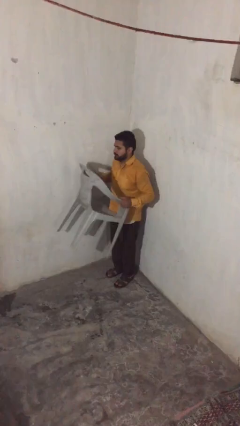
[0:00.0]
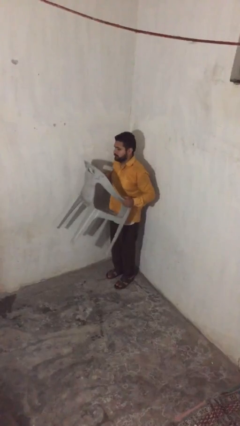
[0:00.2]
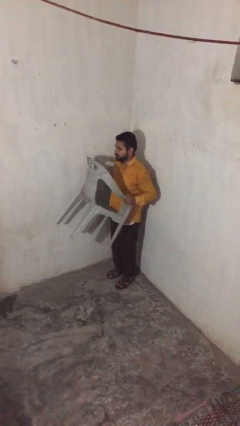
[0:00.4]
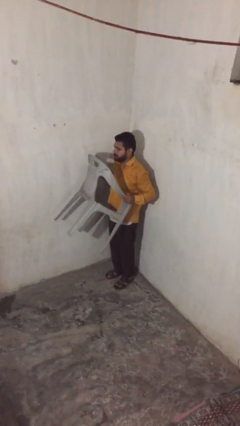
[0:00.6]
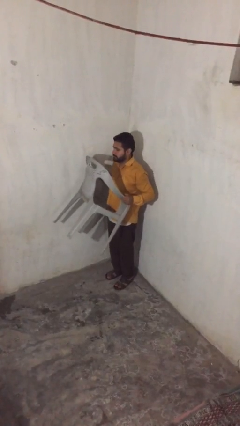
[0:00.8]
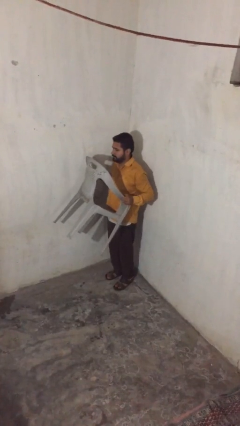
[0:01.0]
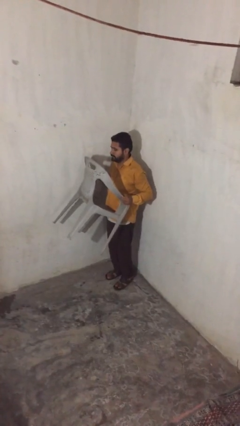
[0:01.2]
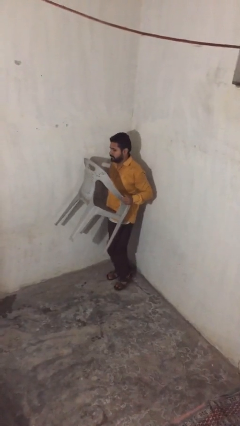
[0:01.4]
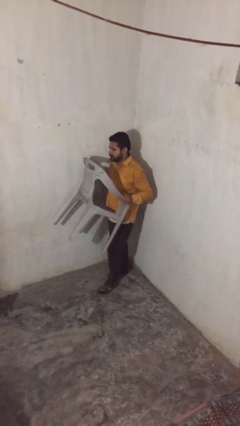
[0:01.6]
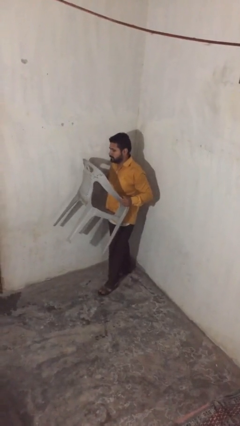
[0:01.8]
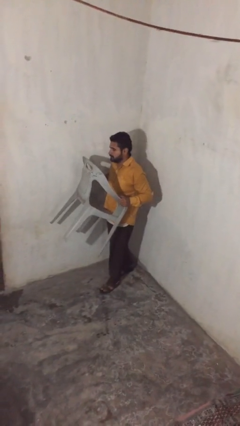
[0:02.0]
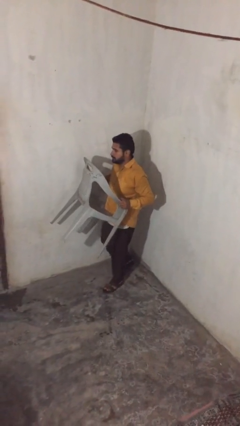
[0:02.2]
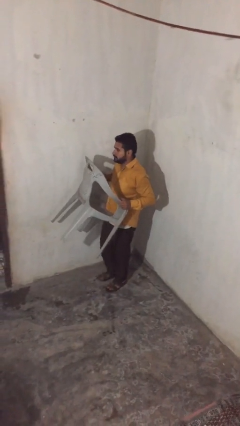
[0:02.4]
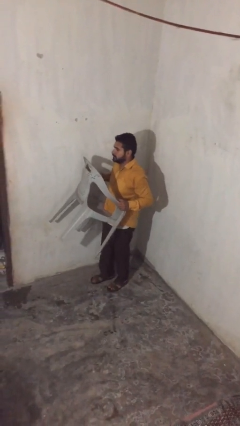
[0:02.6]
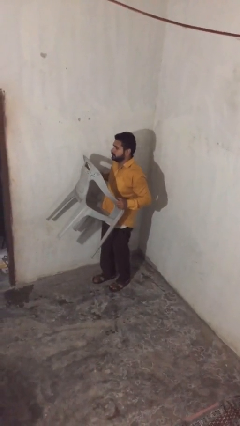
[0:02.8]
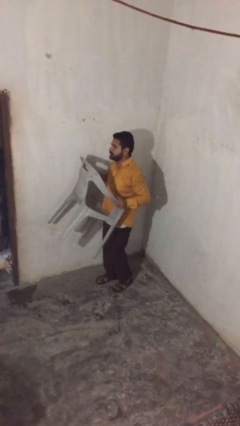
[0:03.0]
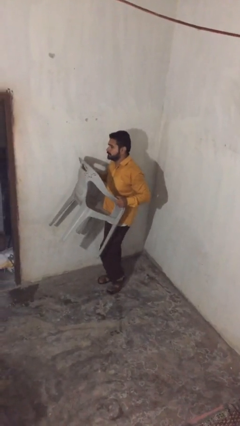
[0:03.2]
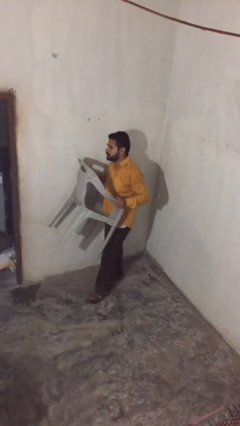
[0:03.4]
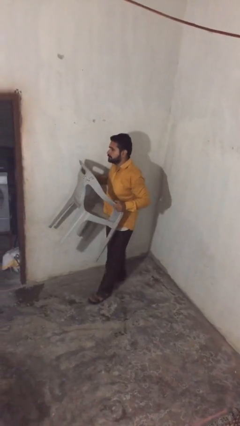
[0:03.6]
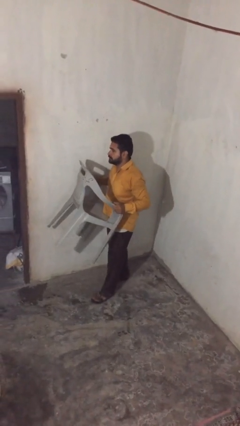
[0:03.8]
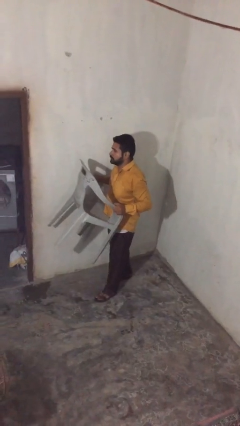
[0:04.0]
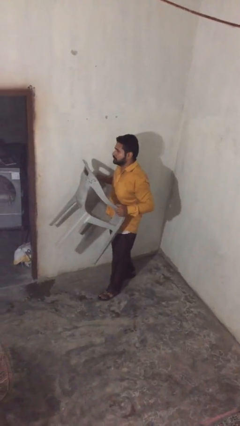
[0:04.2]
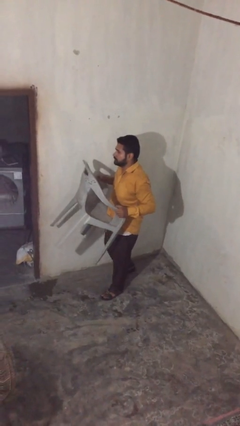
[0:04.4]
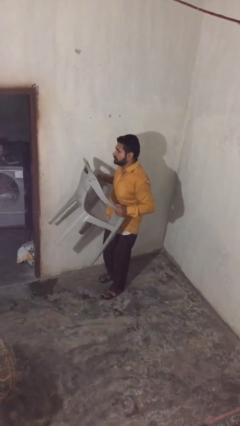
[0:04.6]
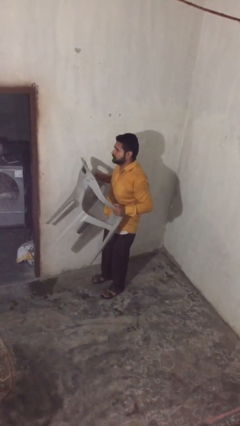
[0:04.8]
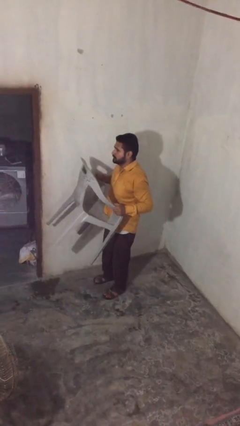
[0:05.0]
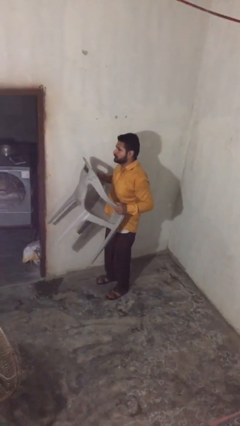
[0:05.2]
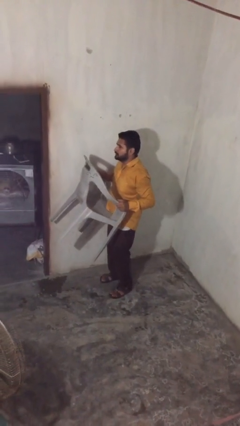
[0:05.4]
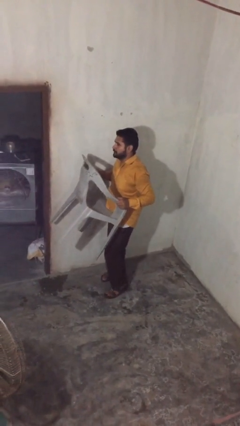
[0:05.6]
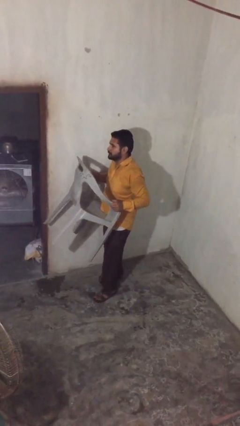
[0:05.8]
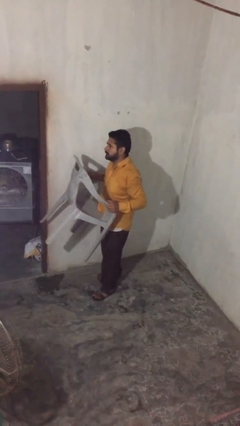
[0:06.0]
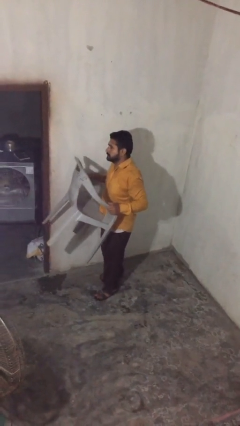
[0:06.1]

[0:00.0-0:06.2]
person carries heavy object

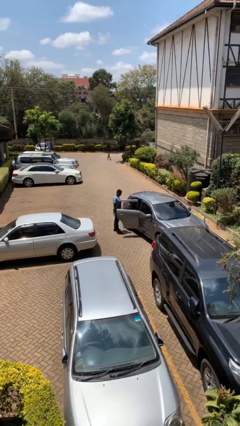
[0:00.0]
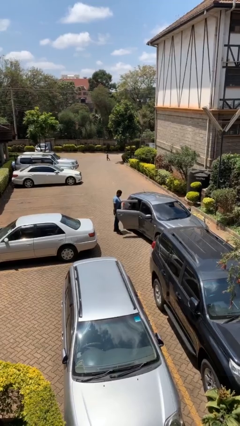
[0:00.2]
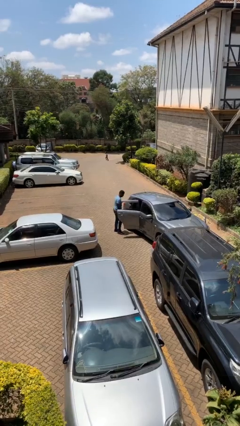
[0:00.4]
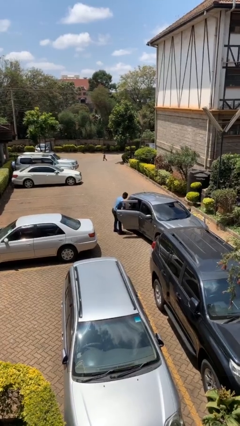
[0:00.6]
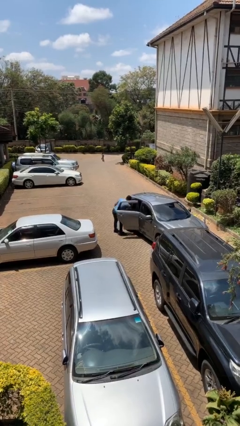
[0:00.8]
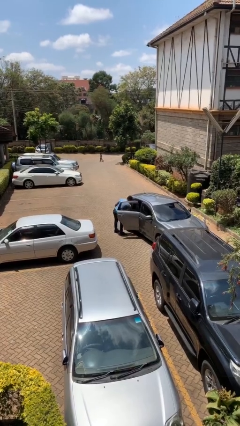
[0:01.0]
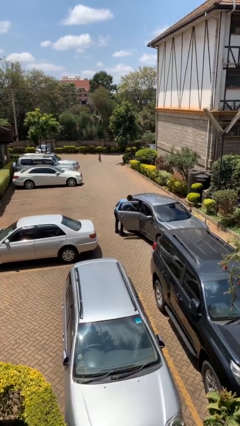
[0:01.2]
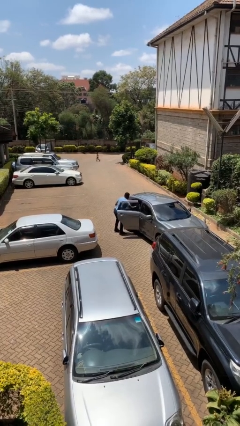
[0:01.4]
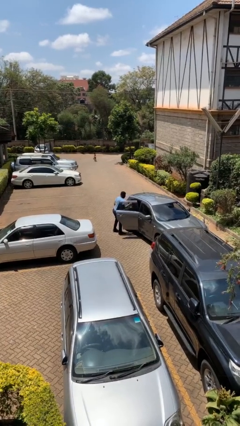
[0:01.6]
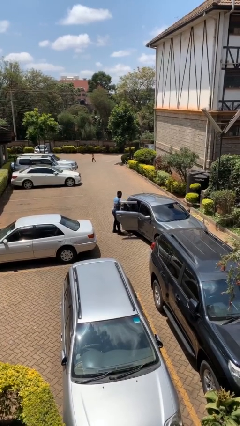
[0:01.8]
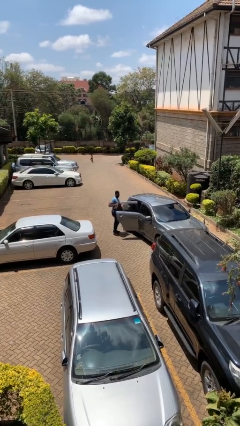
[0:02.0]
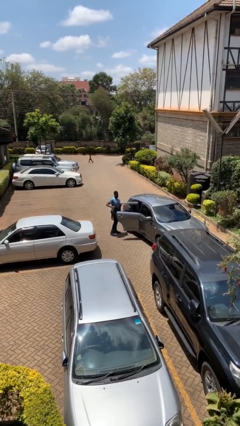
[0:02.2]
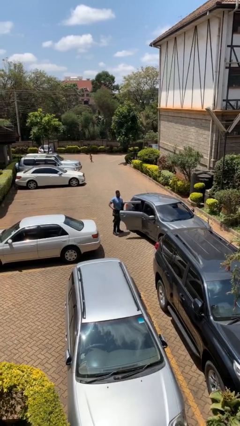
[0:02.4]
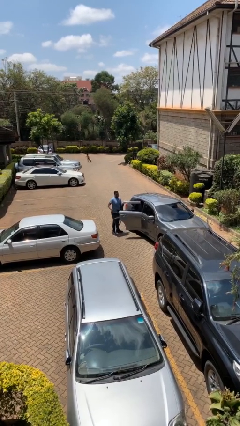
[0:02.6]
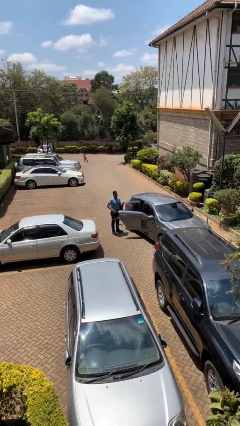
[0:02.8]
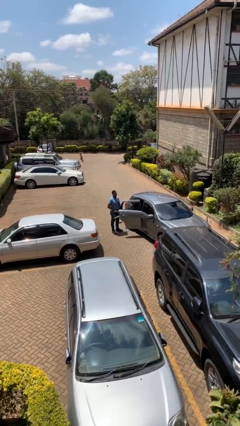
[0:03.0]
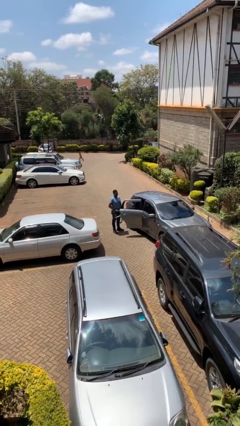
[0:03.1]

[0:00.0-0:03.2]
person unloads car

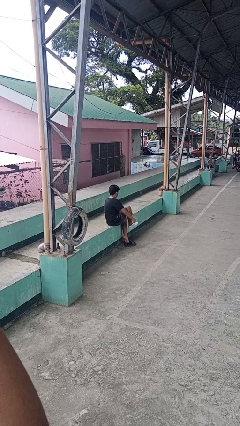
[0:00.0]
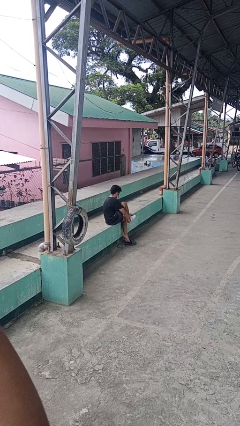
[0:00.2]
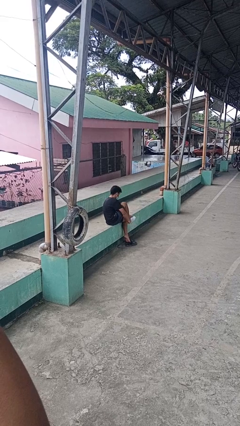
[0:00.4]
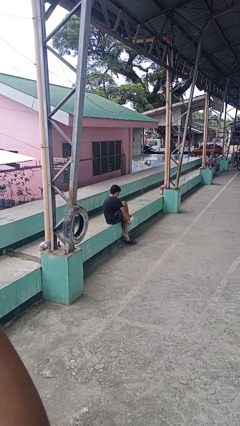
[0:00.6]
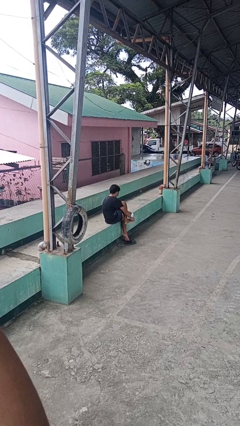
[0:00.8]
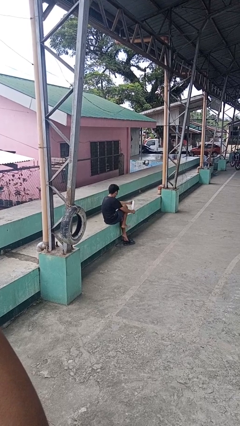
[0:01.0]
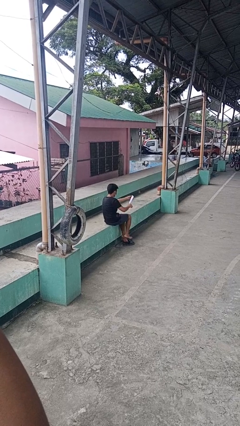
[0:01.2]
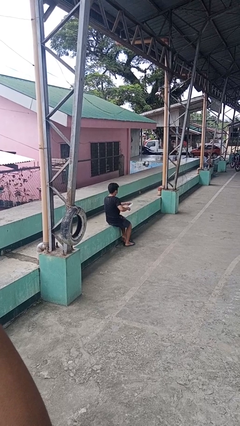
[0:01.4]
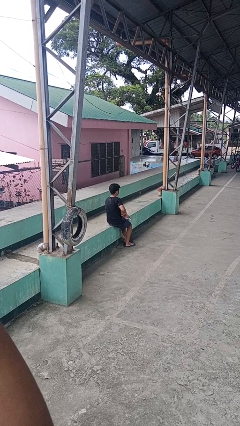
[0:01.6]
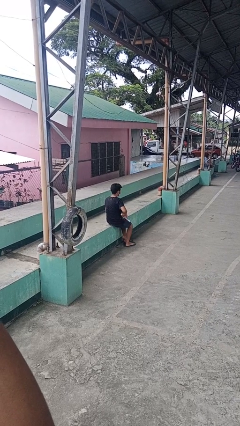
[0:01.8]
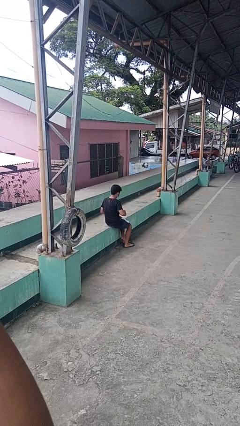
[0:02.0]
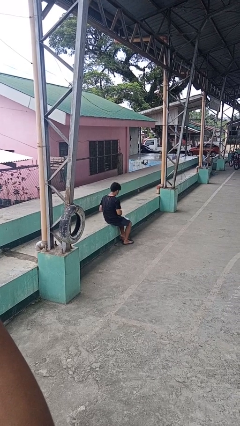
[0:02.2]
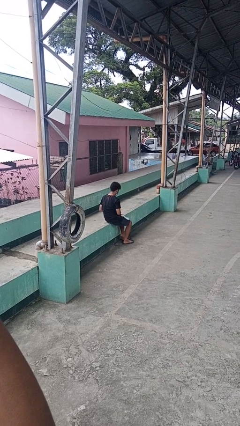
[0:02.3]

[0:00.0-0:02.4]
person takes off socks

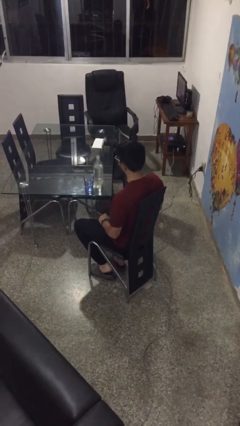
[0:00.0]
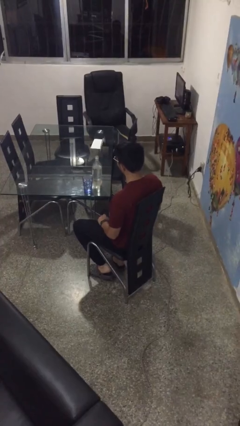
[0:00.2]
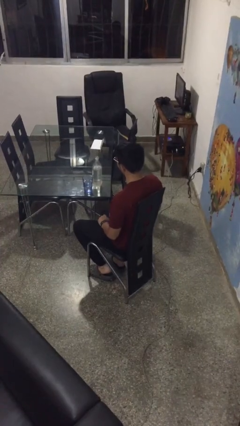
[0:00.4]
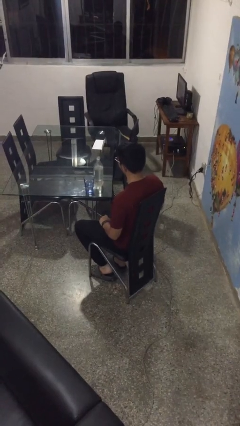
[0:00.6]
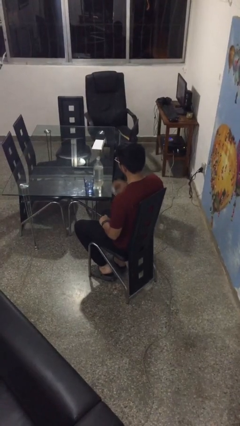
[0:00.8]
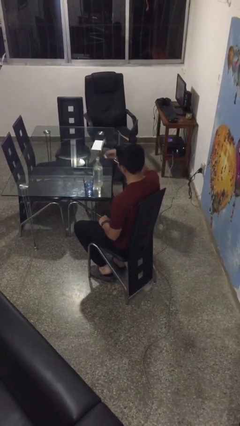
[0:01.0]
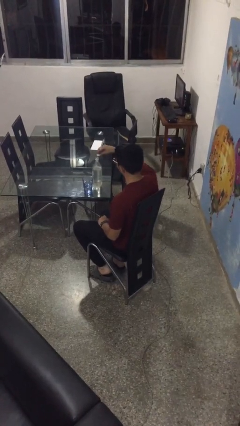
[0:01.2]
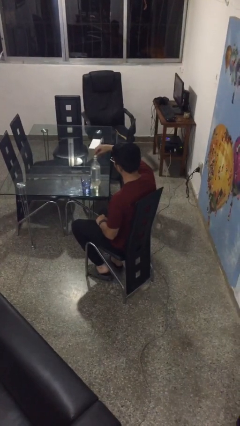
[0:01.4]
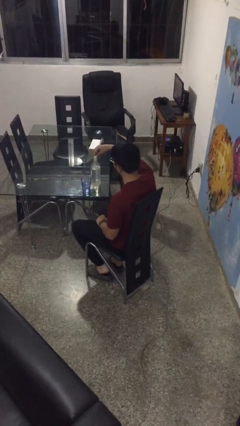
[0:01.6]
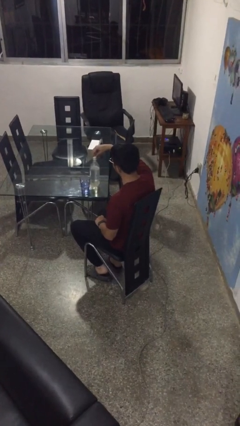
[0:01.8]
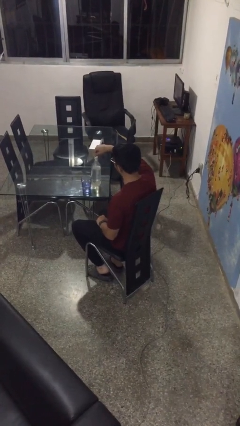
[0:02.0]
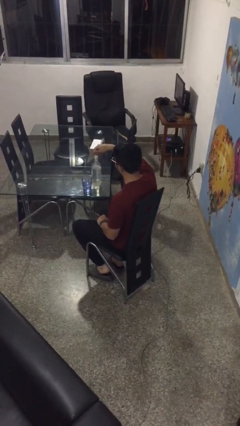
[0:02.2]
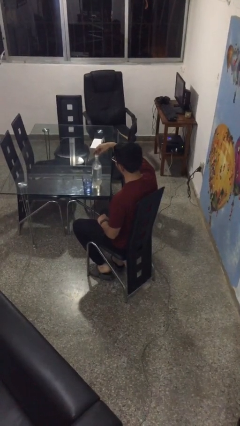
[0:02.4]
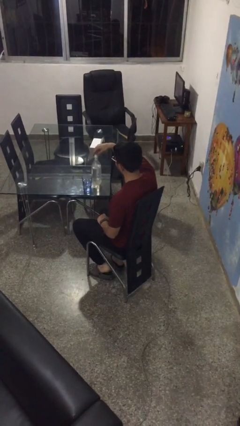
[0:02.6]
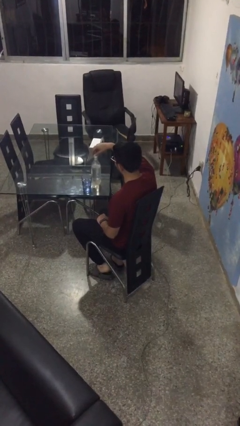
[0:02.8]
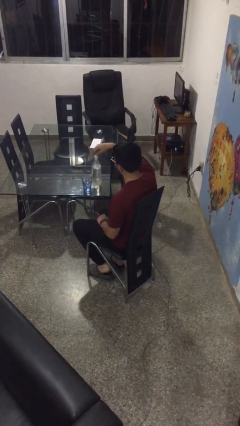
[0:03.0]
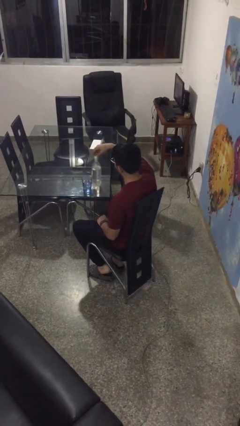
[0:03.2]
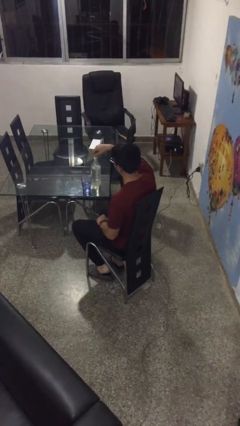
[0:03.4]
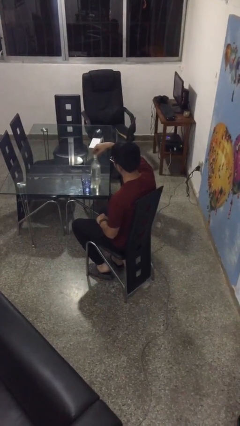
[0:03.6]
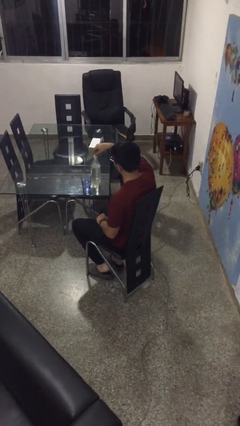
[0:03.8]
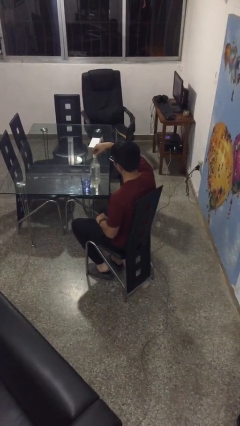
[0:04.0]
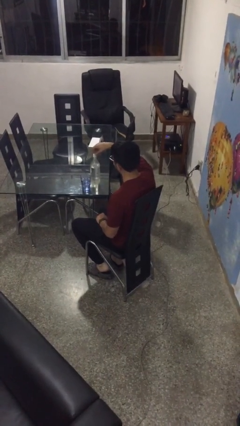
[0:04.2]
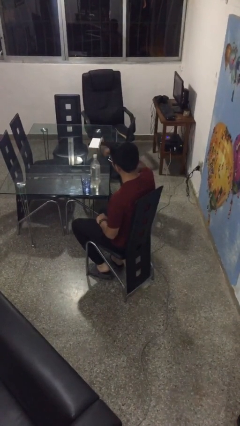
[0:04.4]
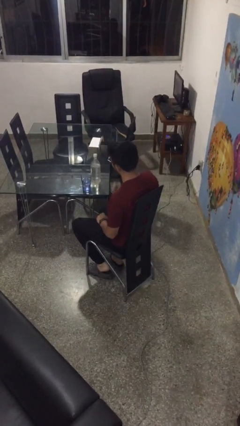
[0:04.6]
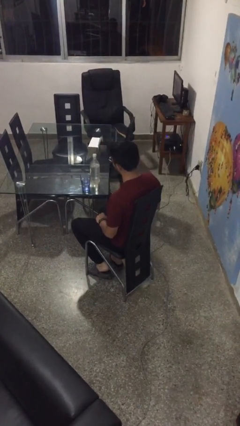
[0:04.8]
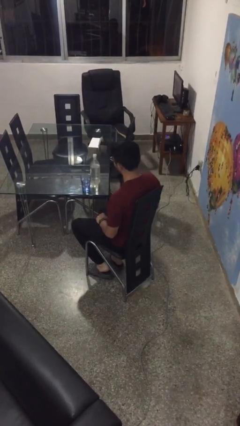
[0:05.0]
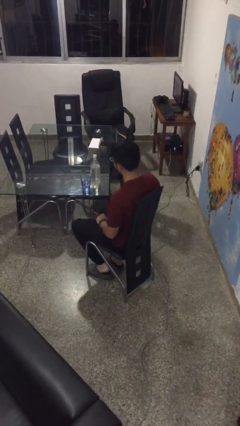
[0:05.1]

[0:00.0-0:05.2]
person screws lid to bottle

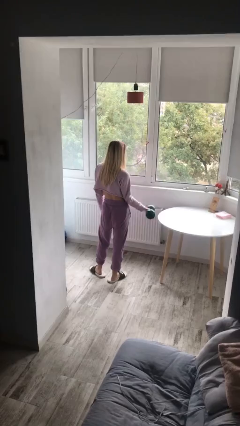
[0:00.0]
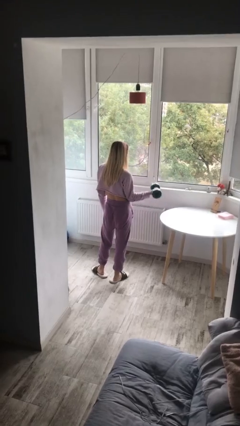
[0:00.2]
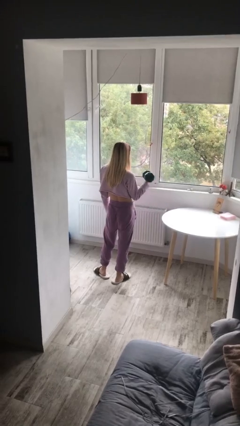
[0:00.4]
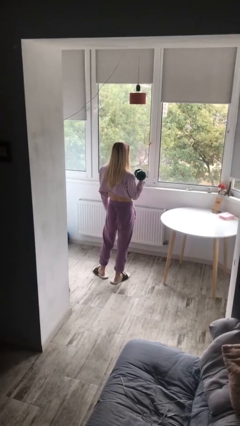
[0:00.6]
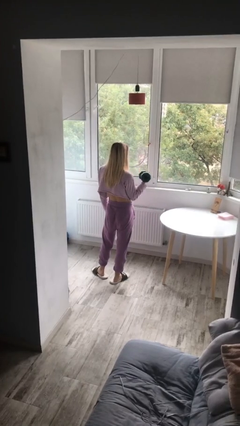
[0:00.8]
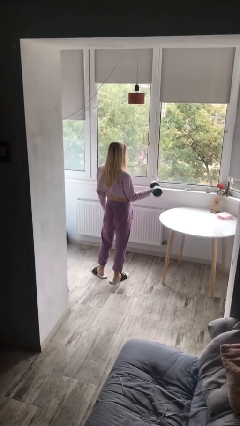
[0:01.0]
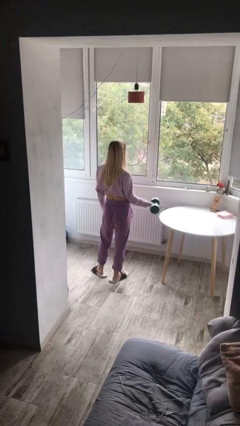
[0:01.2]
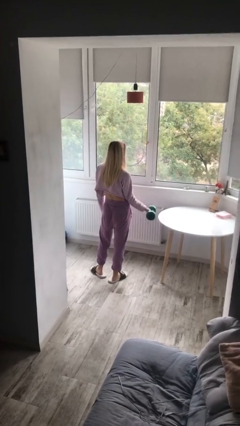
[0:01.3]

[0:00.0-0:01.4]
person lifts dumbbells
